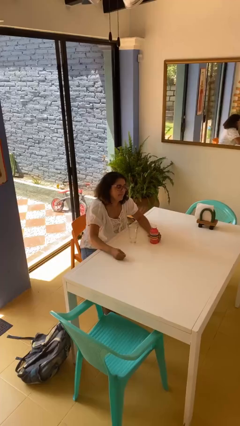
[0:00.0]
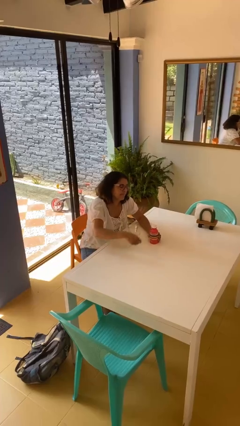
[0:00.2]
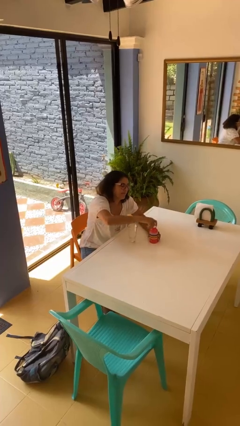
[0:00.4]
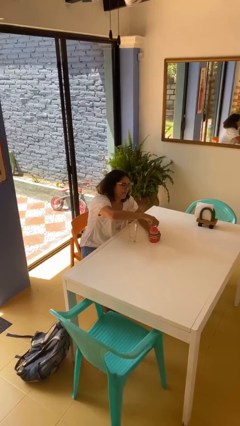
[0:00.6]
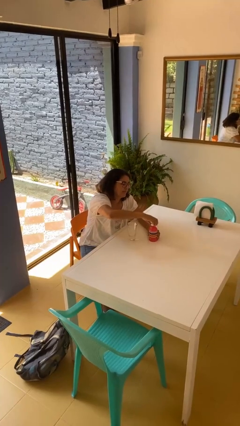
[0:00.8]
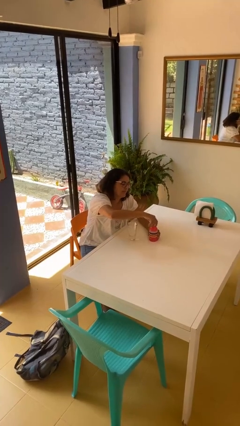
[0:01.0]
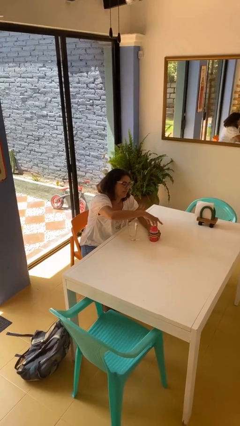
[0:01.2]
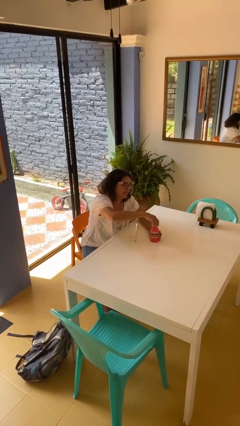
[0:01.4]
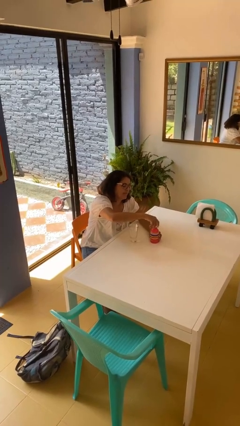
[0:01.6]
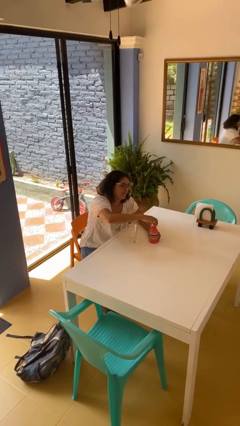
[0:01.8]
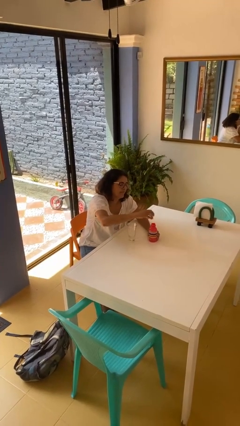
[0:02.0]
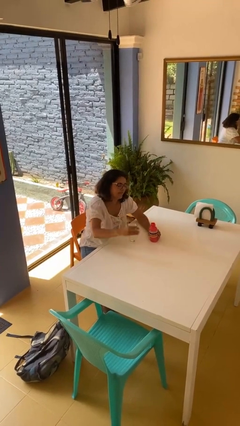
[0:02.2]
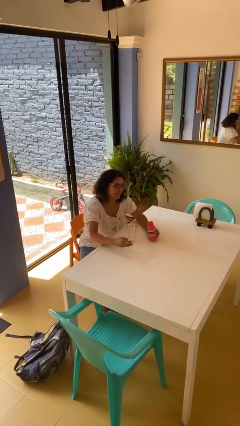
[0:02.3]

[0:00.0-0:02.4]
person unscrews lid from bottle

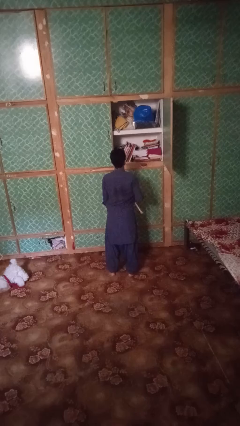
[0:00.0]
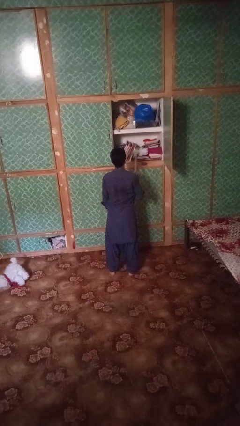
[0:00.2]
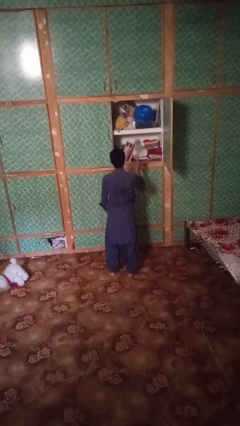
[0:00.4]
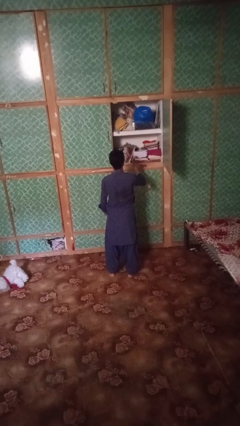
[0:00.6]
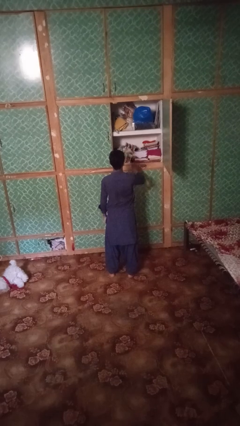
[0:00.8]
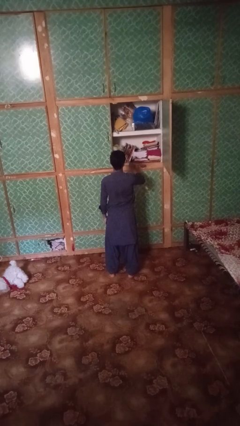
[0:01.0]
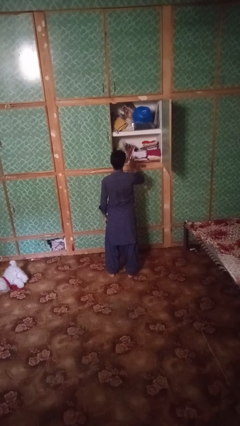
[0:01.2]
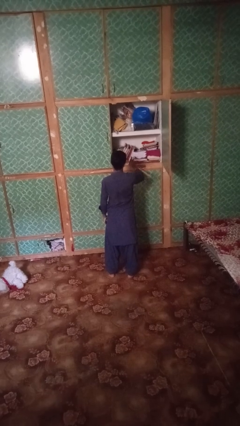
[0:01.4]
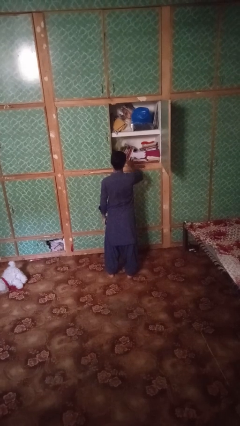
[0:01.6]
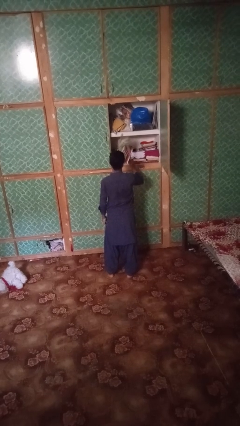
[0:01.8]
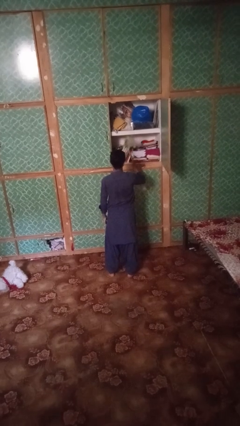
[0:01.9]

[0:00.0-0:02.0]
person dusts furniture

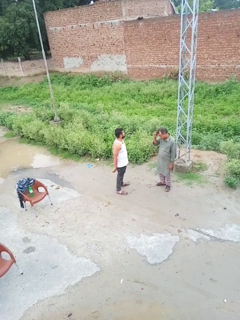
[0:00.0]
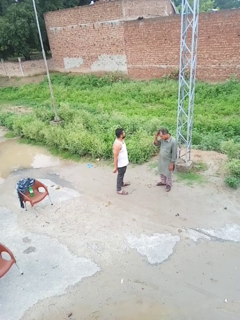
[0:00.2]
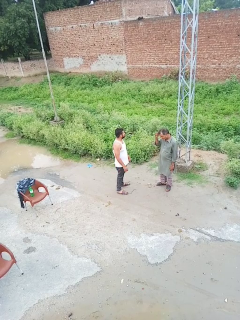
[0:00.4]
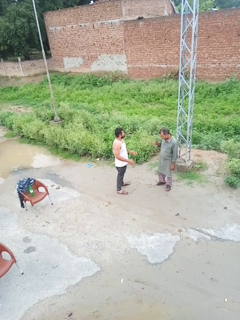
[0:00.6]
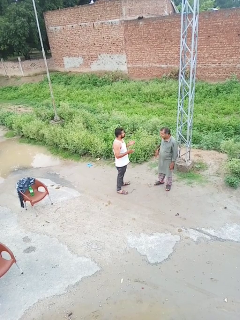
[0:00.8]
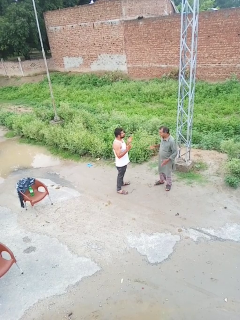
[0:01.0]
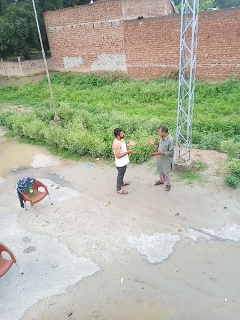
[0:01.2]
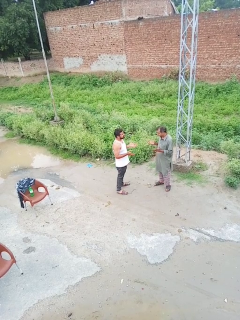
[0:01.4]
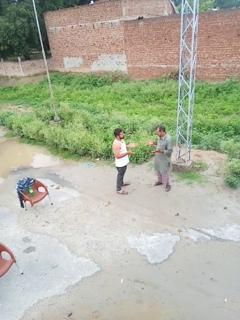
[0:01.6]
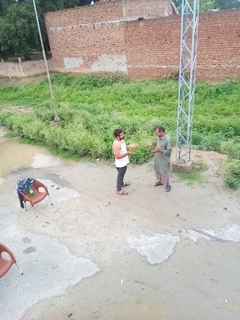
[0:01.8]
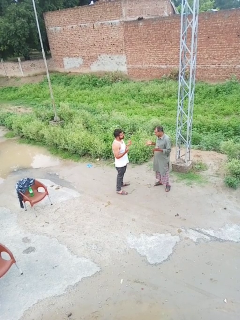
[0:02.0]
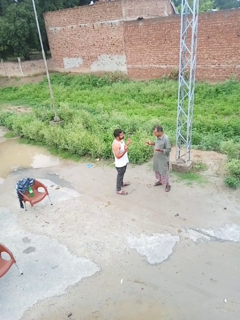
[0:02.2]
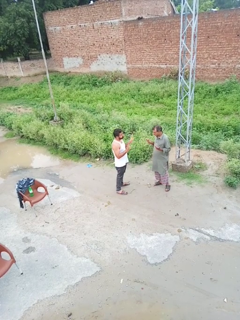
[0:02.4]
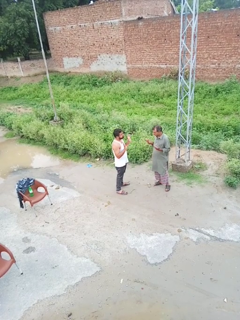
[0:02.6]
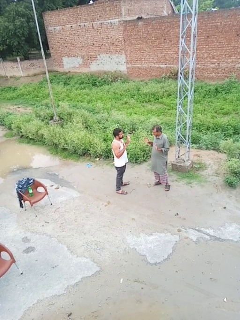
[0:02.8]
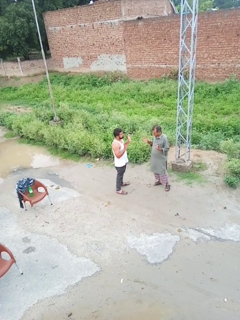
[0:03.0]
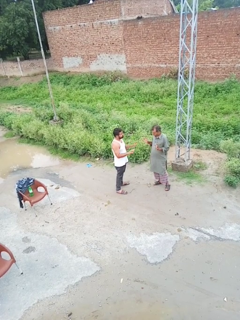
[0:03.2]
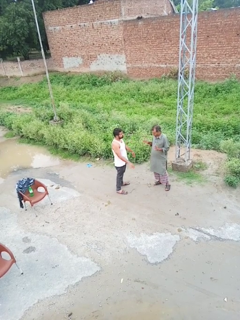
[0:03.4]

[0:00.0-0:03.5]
person talks to person

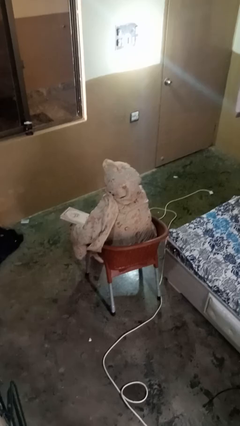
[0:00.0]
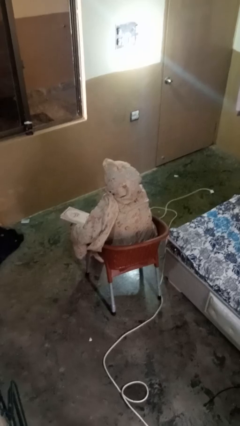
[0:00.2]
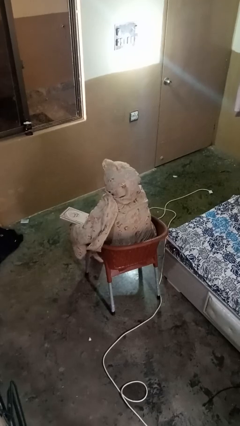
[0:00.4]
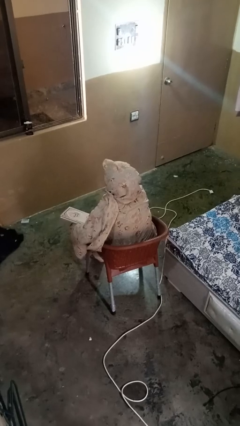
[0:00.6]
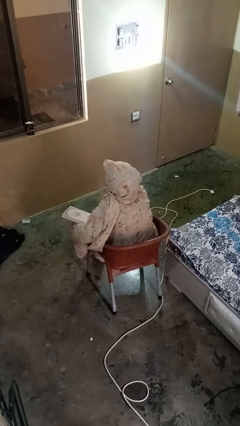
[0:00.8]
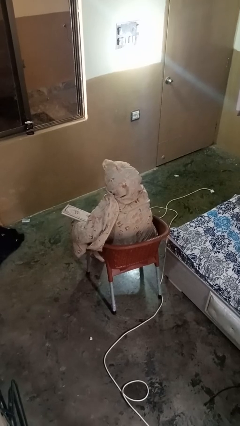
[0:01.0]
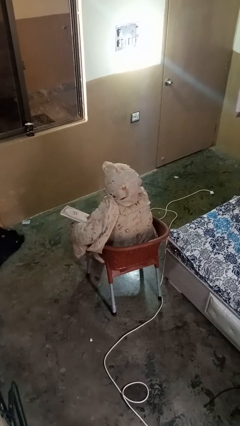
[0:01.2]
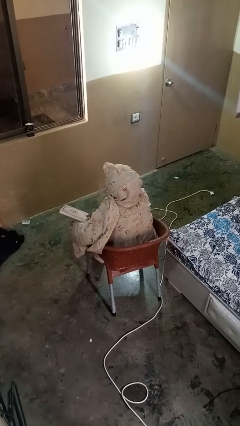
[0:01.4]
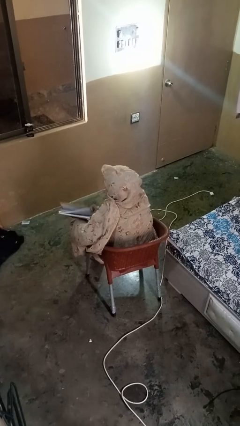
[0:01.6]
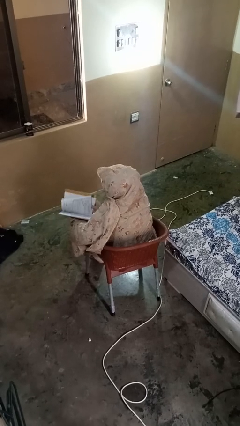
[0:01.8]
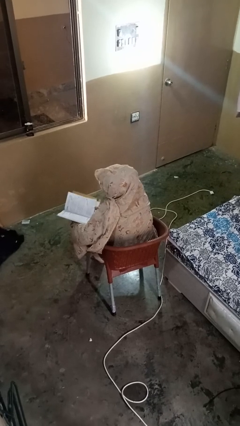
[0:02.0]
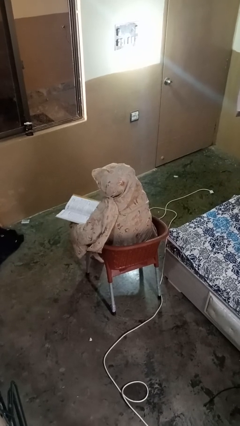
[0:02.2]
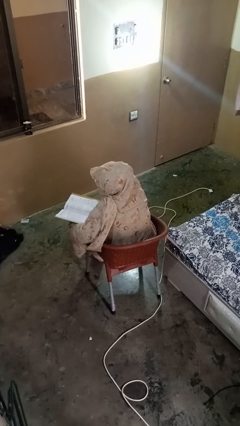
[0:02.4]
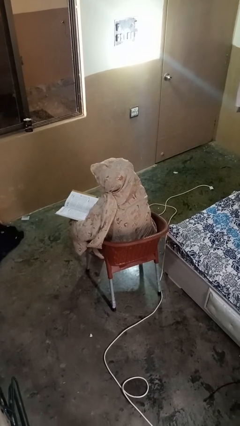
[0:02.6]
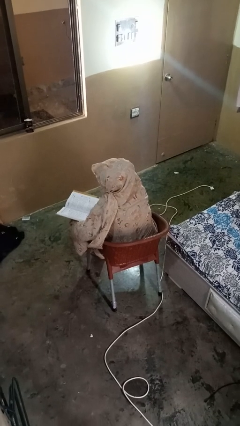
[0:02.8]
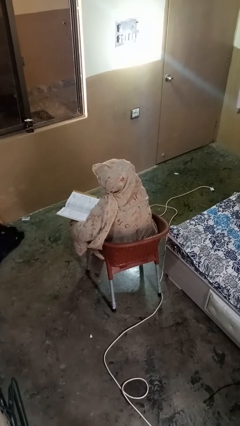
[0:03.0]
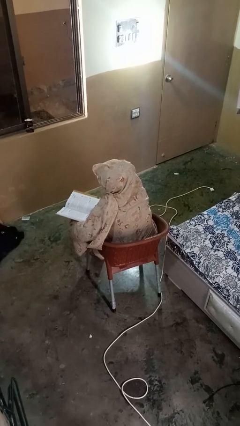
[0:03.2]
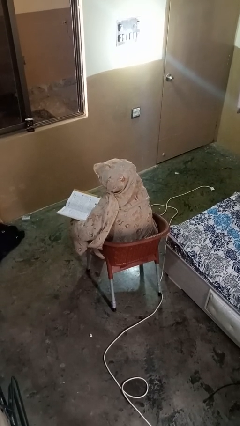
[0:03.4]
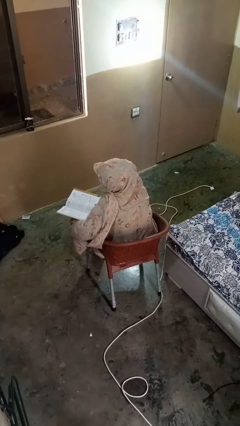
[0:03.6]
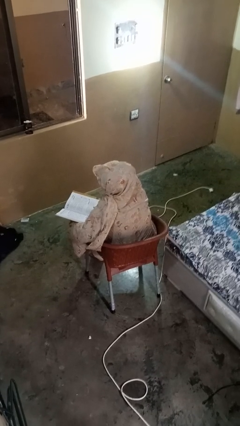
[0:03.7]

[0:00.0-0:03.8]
person reads book

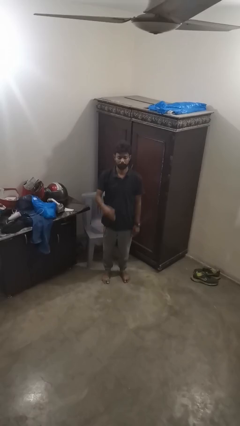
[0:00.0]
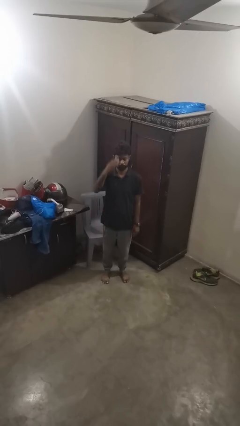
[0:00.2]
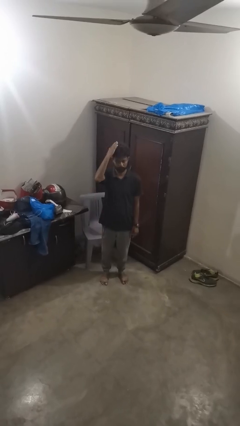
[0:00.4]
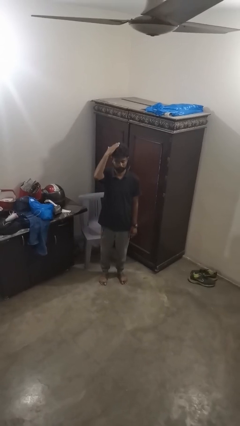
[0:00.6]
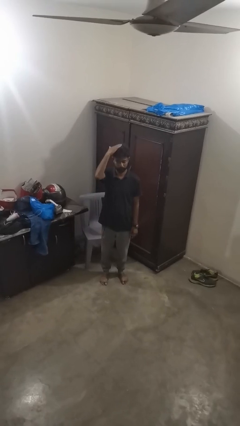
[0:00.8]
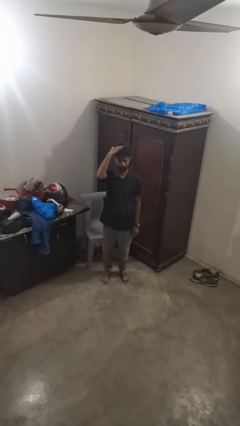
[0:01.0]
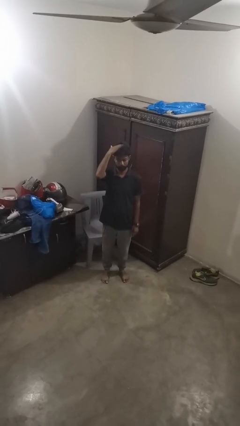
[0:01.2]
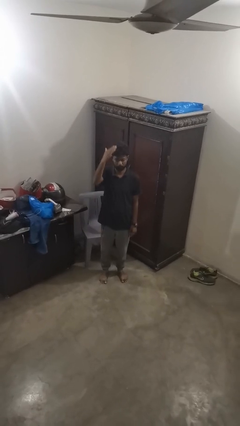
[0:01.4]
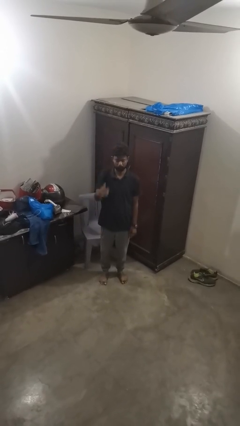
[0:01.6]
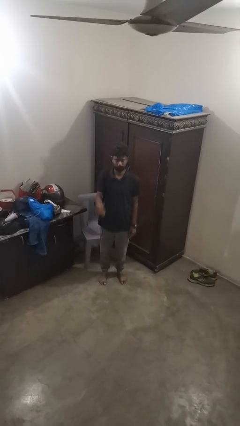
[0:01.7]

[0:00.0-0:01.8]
person pats head

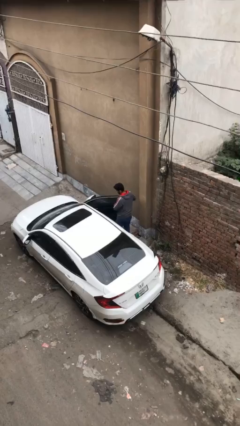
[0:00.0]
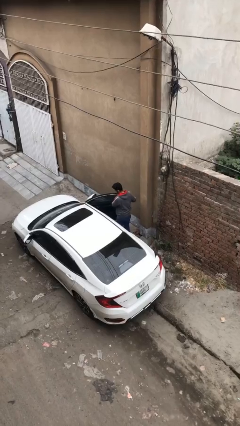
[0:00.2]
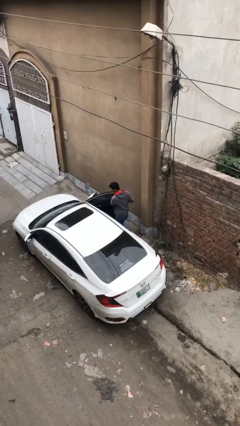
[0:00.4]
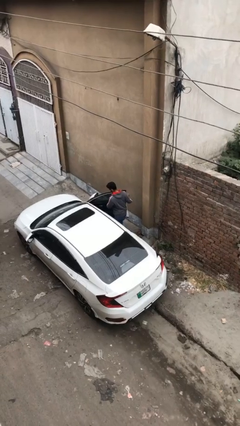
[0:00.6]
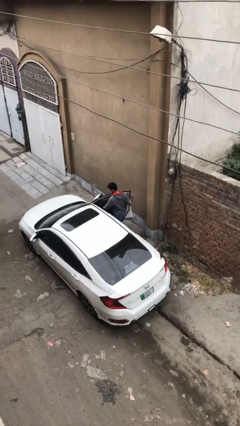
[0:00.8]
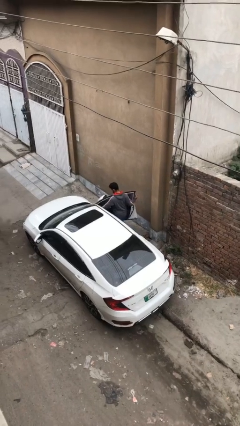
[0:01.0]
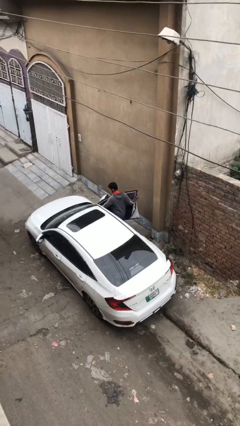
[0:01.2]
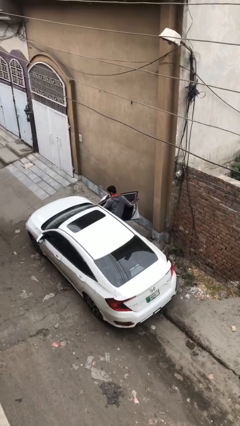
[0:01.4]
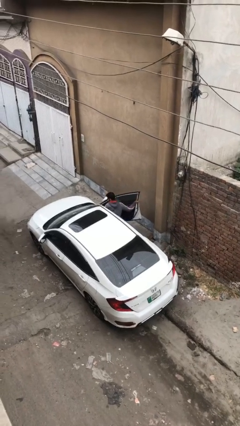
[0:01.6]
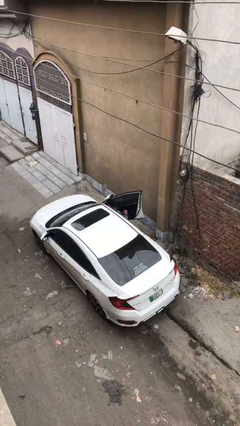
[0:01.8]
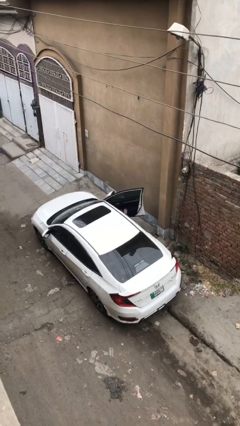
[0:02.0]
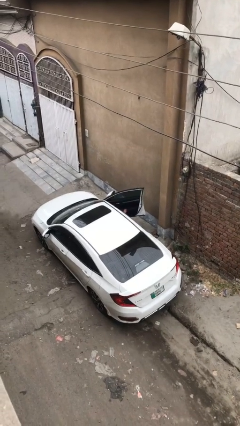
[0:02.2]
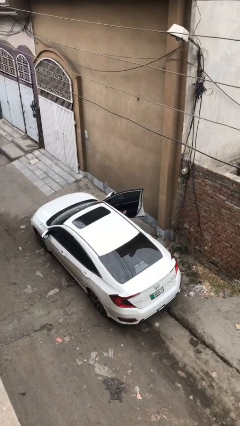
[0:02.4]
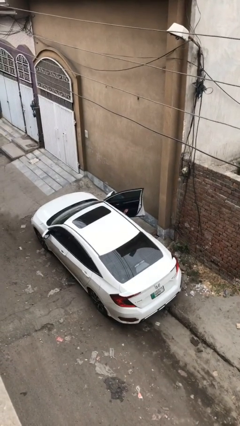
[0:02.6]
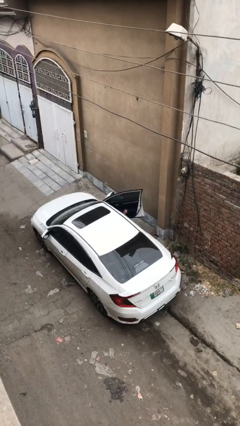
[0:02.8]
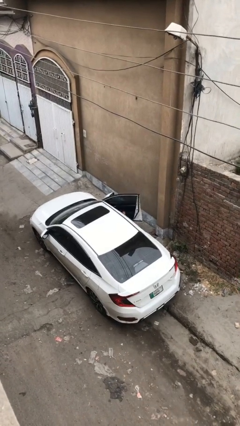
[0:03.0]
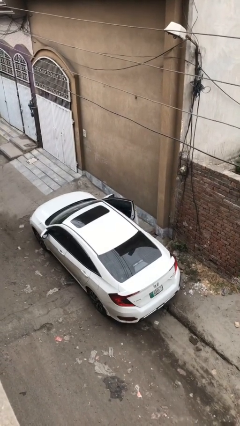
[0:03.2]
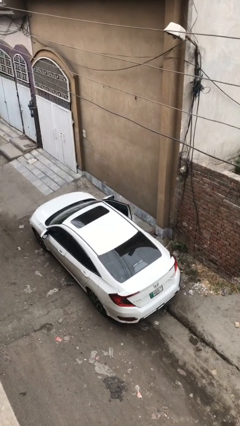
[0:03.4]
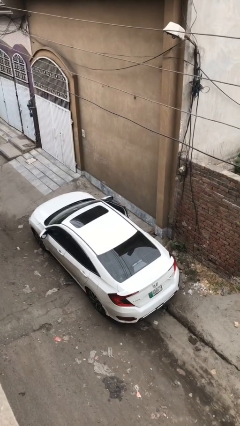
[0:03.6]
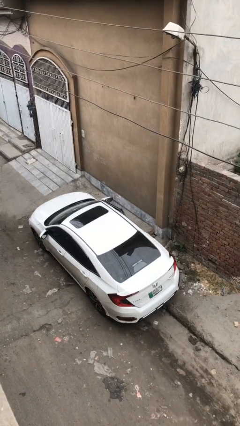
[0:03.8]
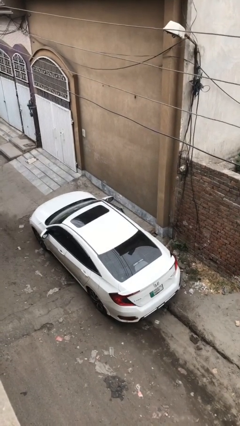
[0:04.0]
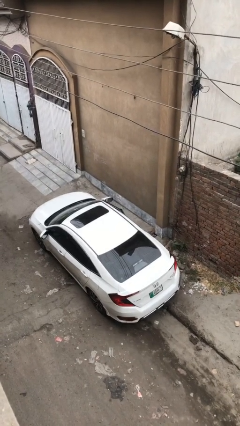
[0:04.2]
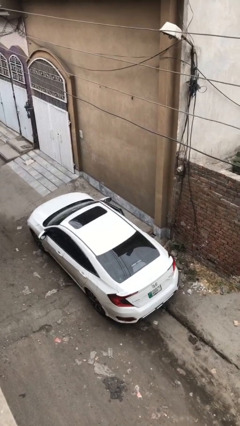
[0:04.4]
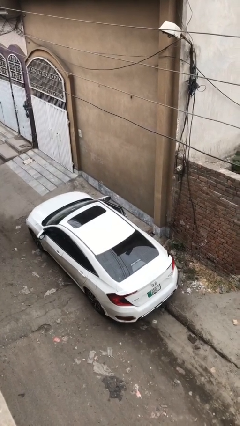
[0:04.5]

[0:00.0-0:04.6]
car picks up person
